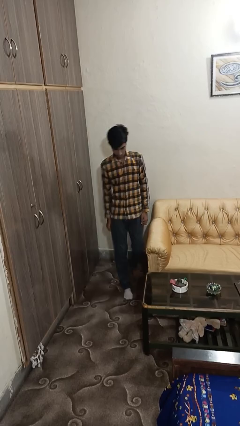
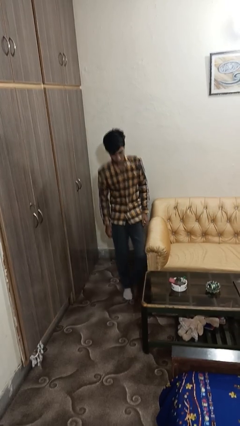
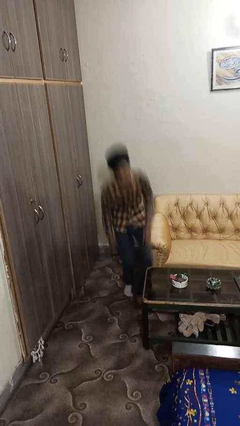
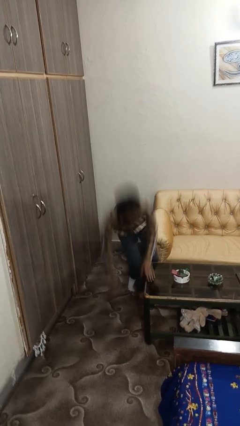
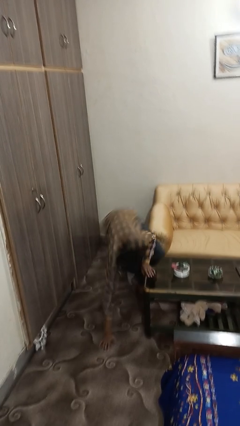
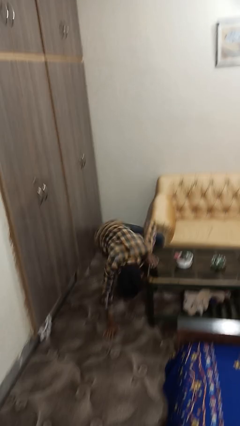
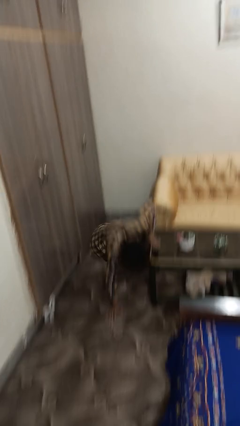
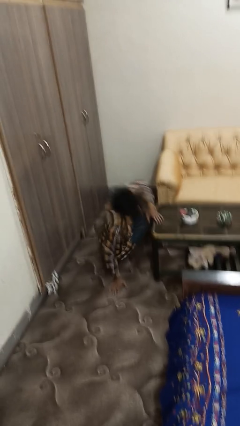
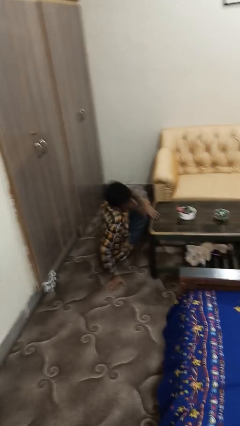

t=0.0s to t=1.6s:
person trips on object on floor

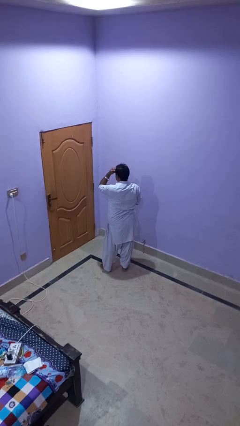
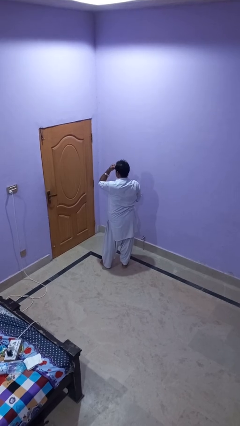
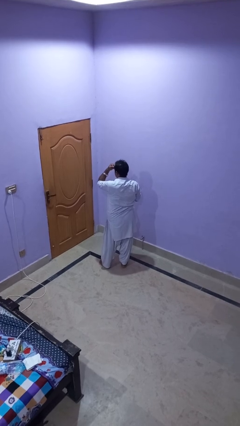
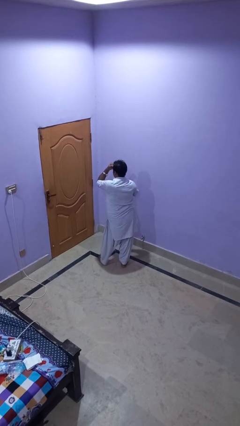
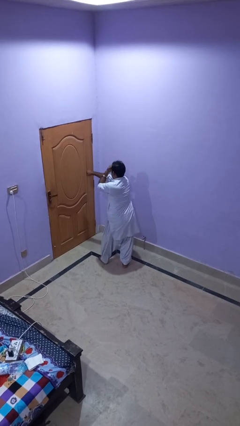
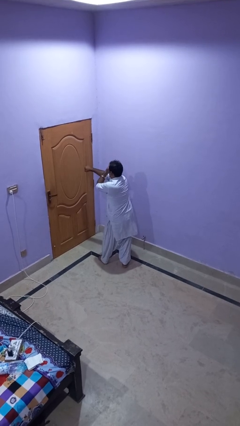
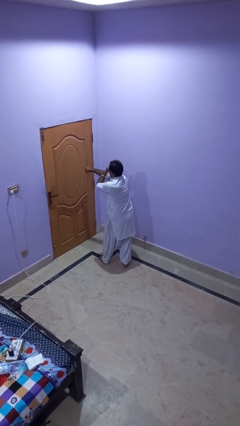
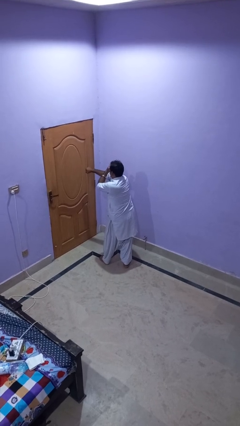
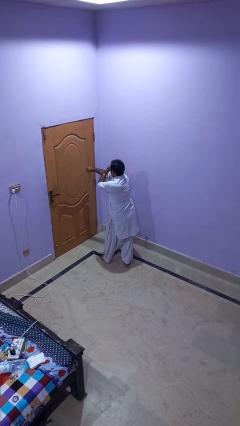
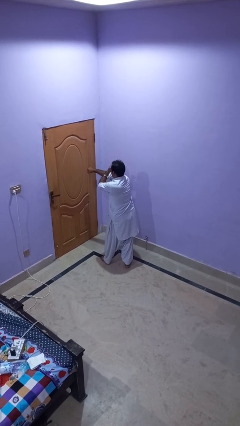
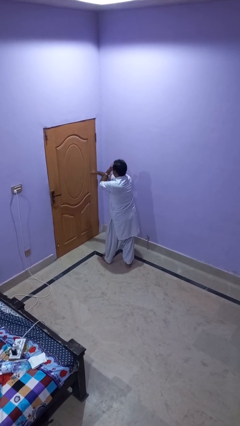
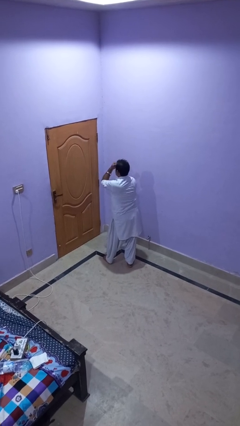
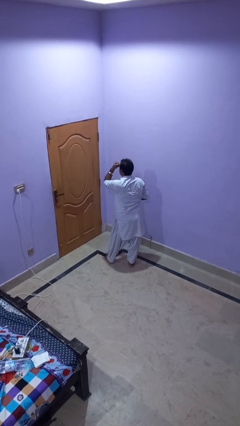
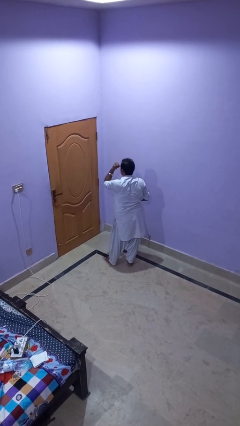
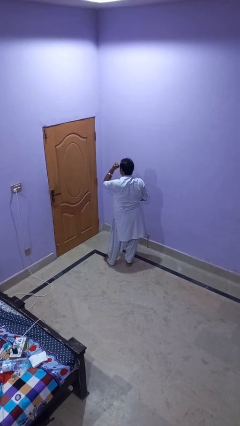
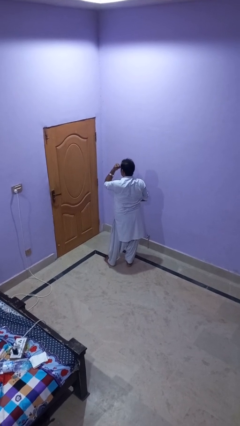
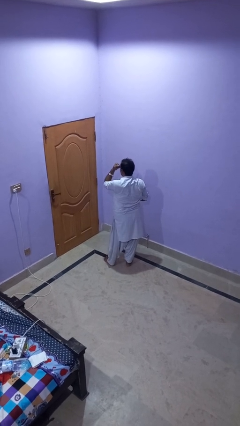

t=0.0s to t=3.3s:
person punches

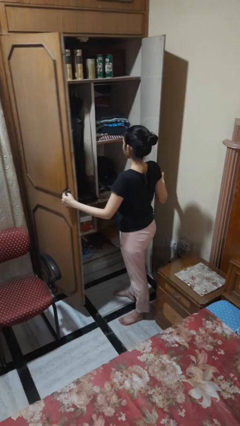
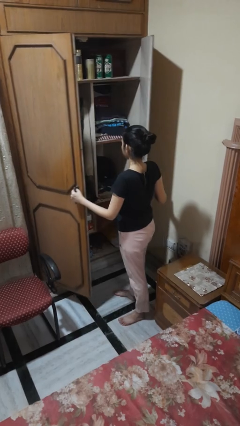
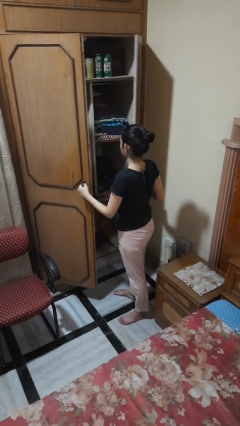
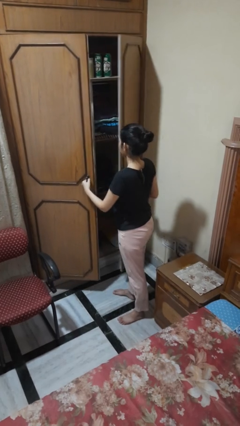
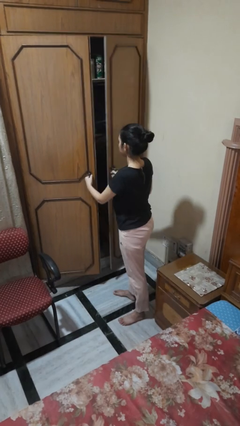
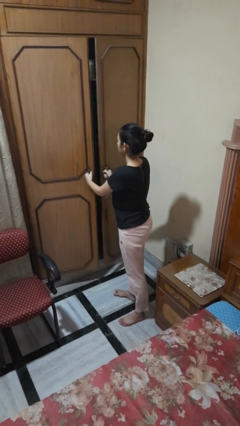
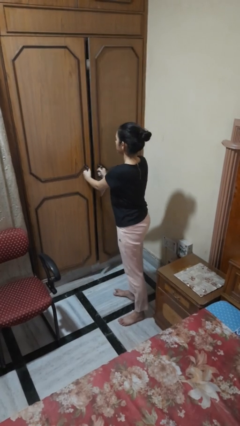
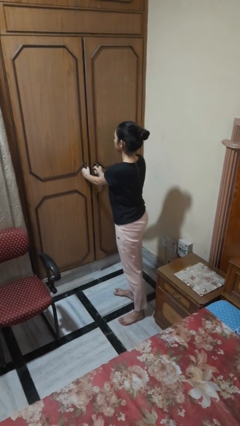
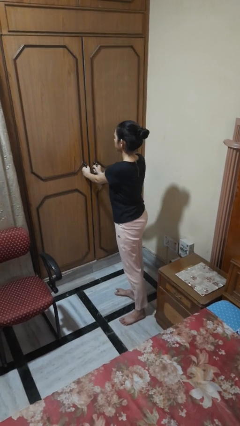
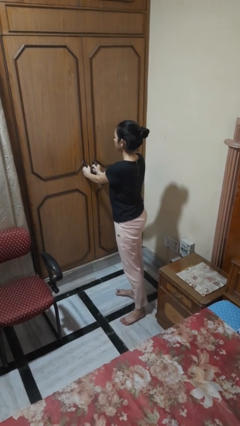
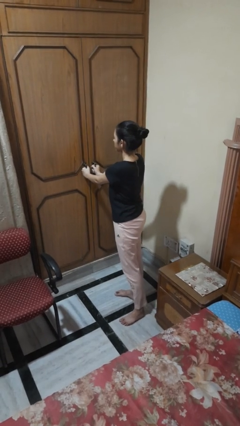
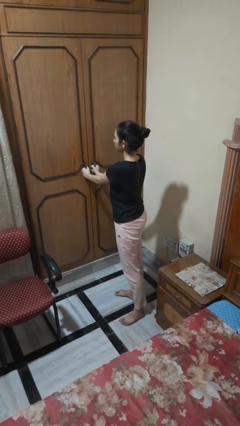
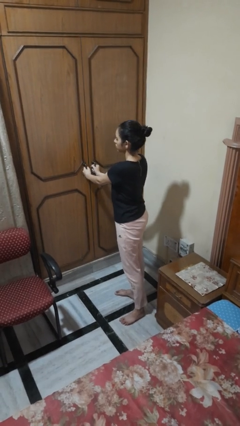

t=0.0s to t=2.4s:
person closes closet door

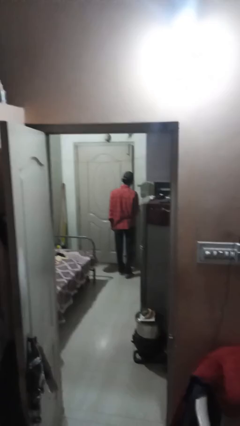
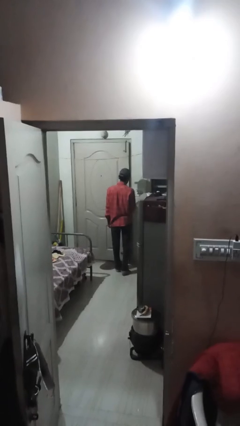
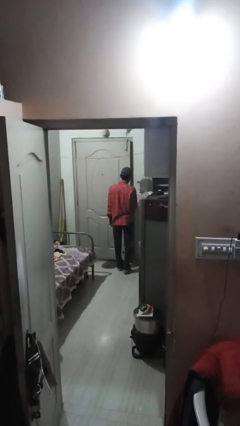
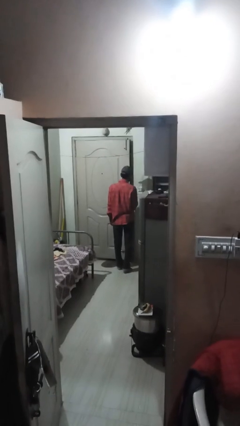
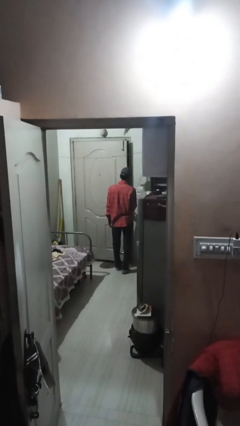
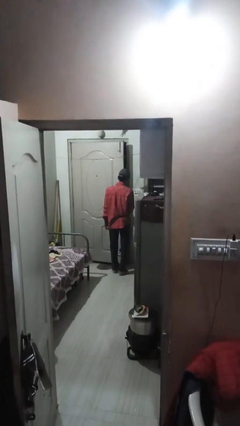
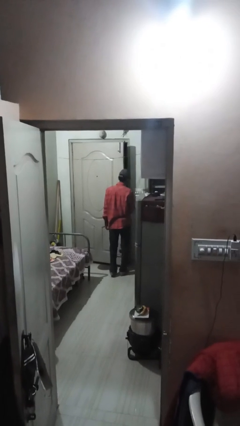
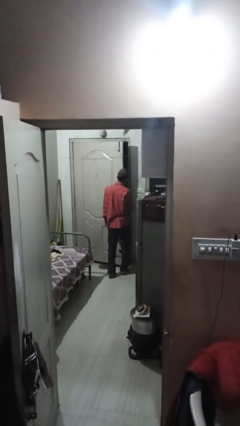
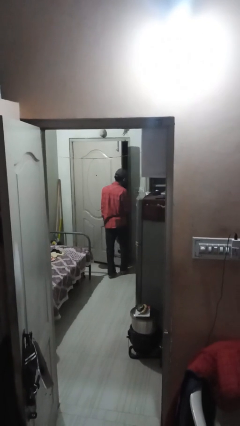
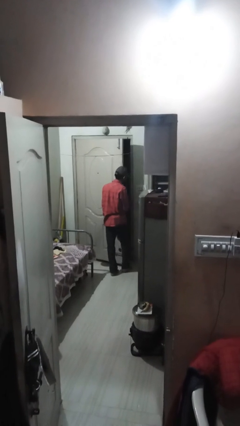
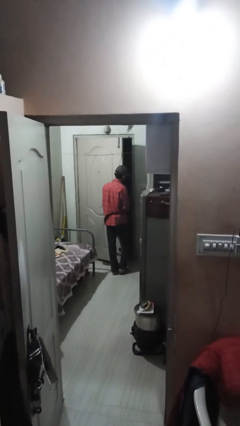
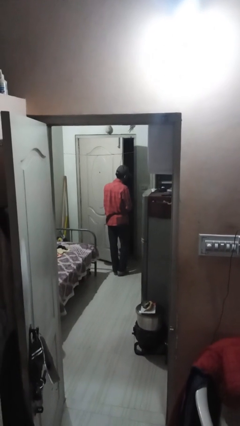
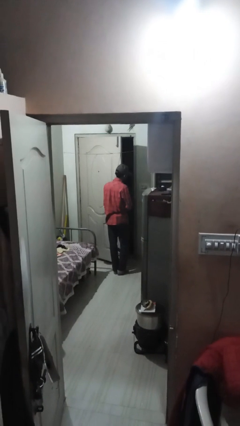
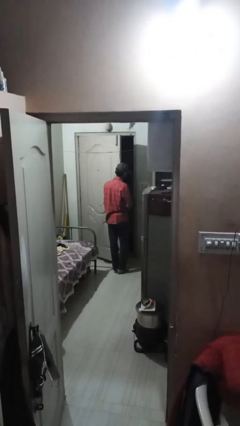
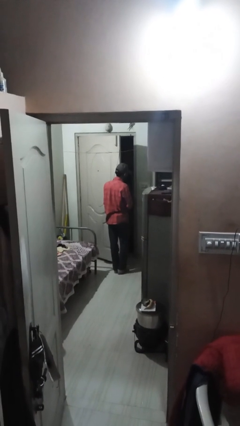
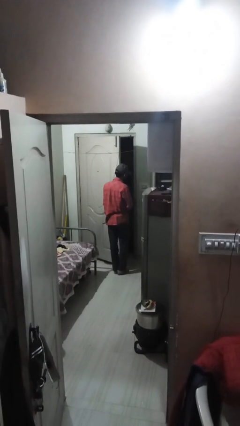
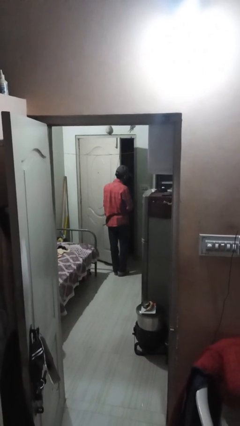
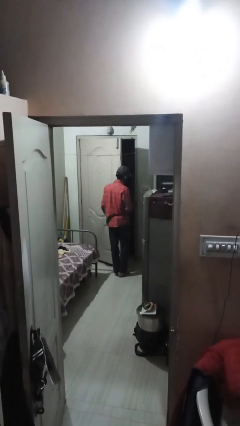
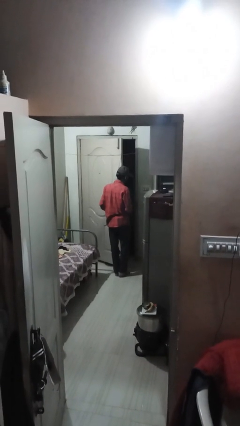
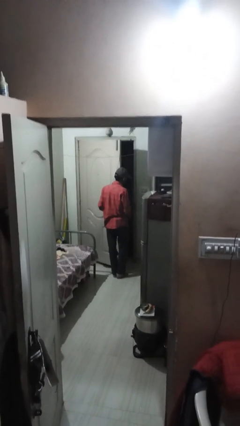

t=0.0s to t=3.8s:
person opens facility door

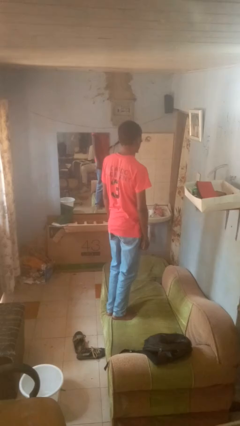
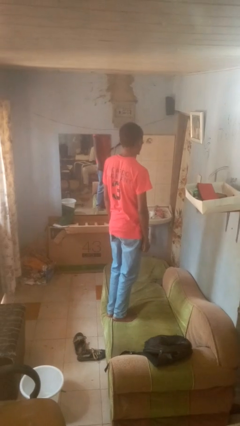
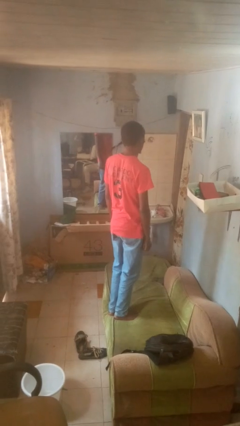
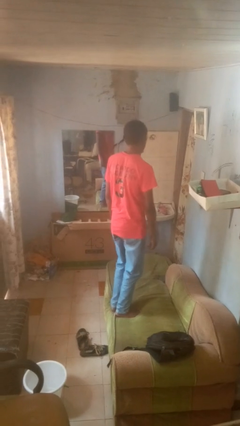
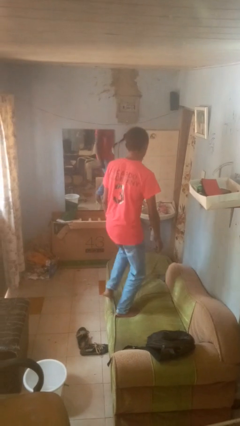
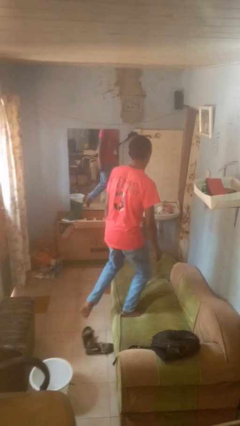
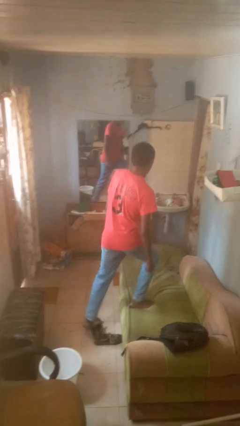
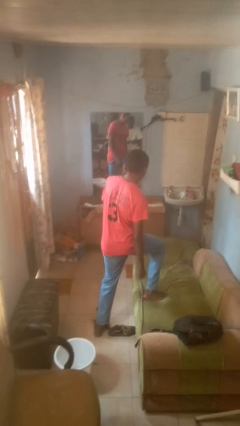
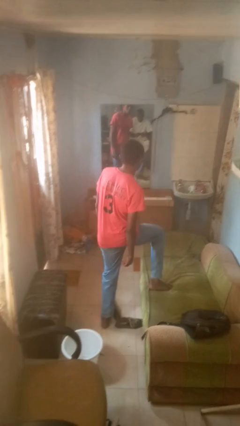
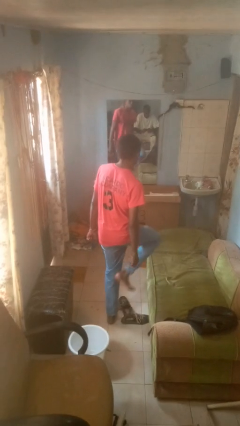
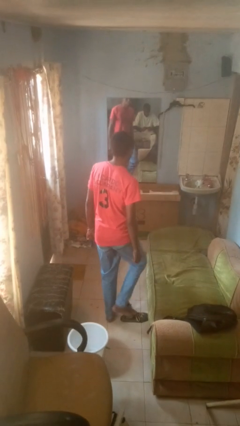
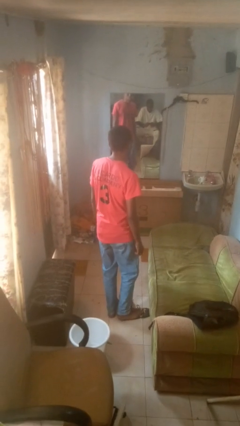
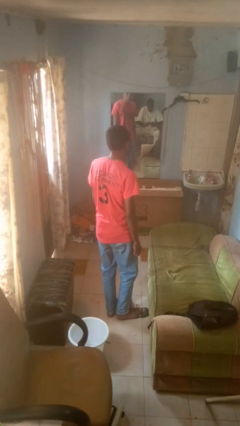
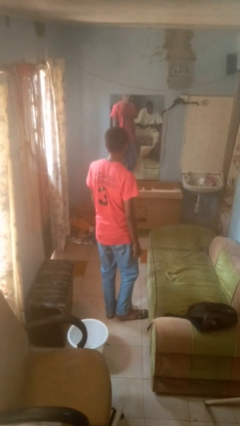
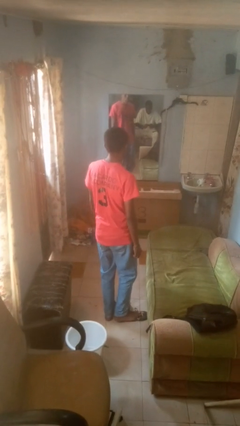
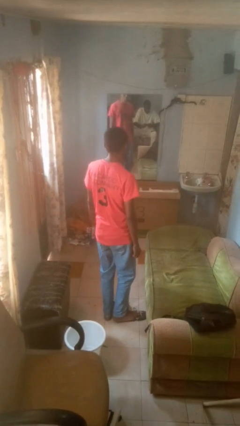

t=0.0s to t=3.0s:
person climbs off couch

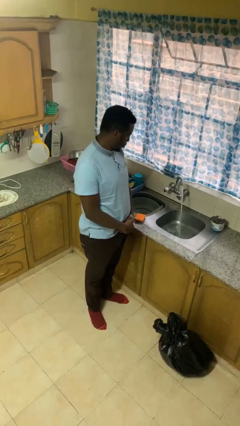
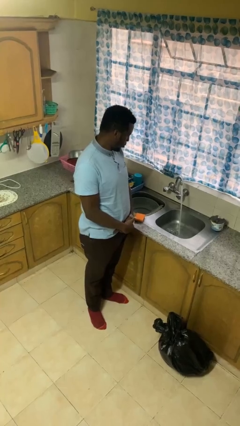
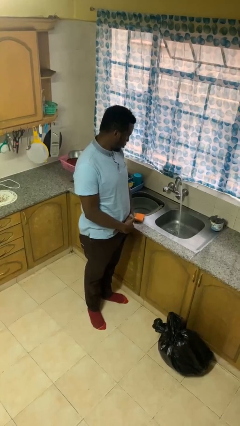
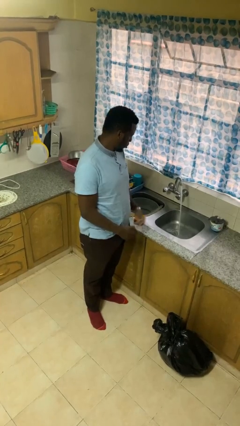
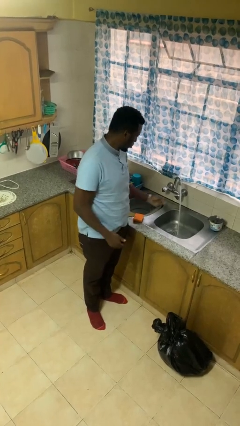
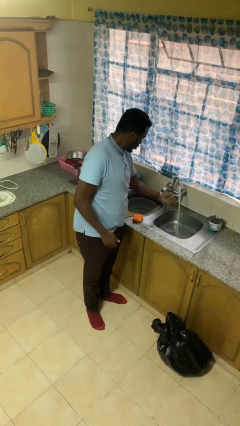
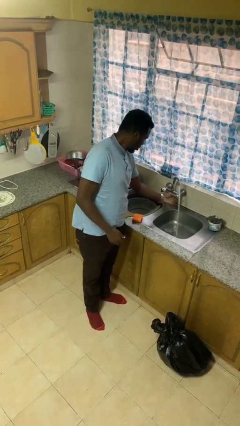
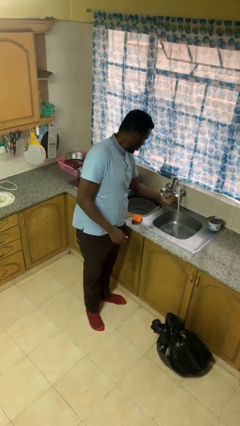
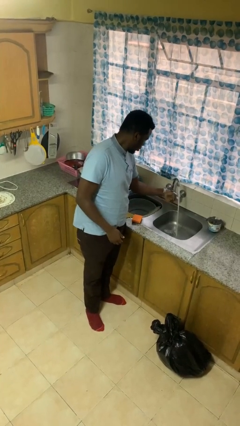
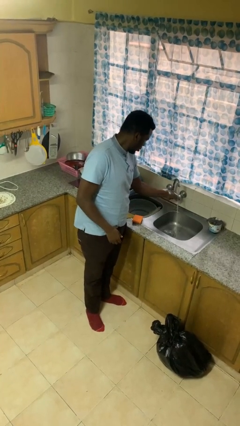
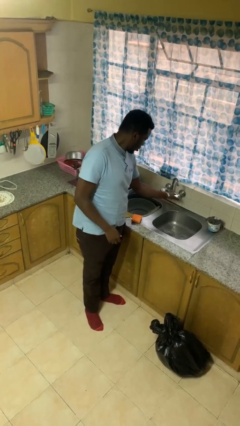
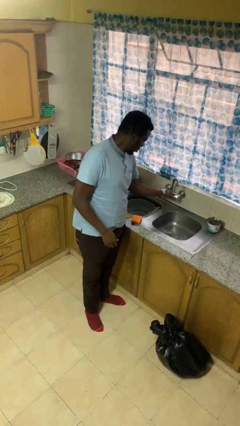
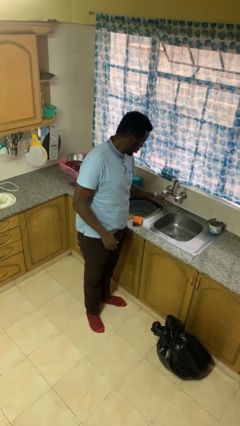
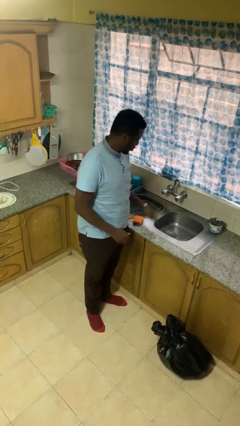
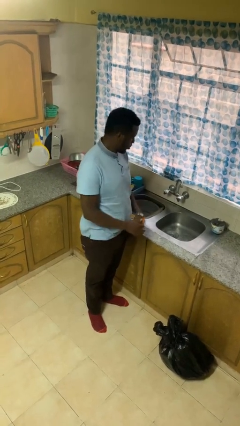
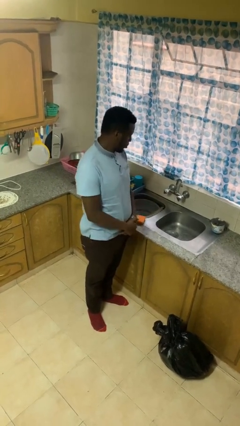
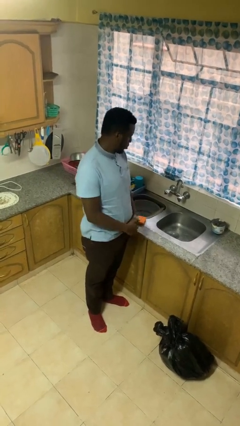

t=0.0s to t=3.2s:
person turns off faucet
